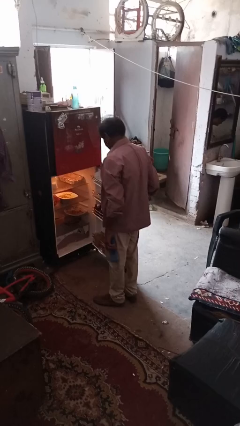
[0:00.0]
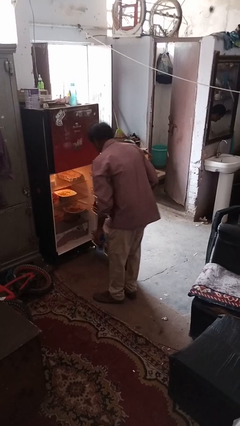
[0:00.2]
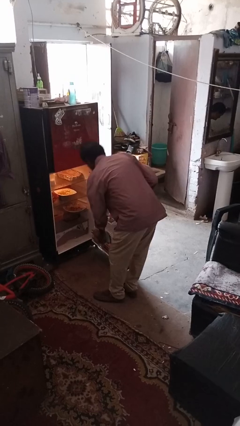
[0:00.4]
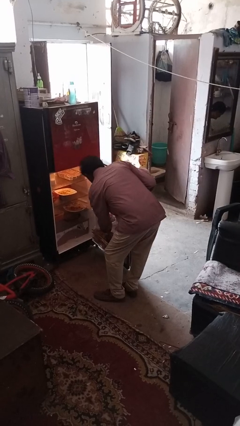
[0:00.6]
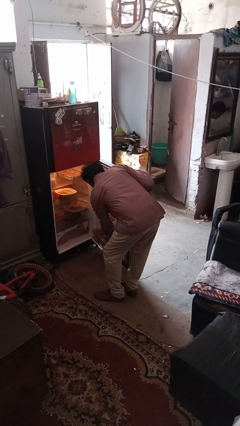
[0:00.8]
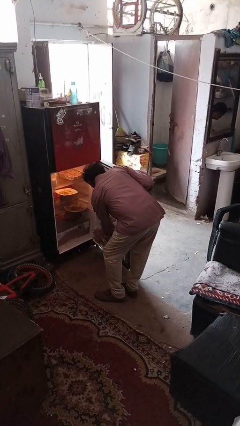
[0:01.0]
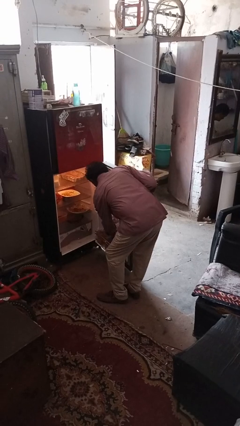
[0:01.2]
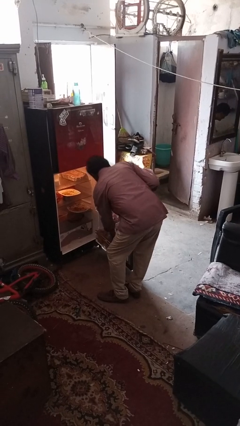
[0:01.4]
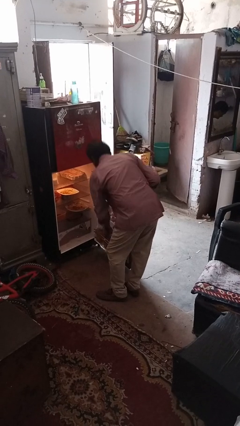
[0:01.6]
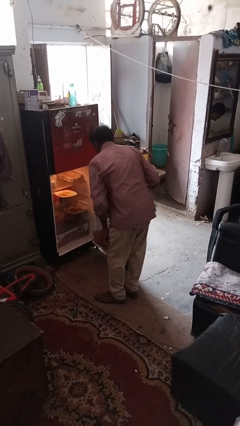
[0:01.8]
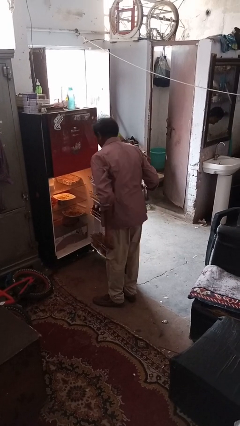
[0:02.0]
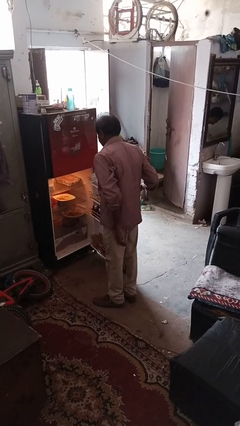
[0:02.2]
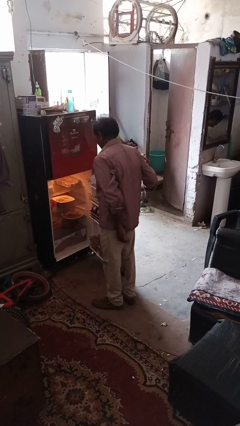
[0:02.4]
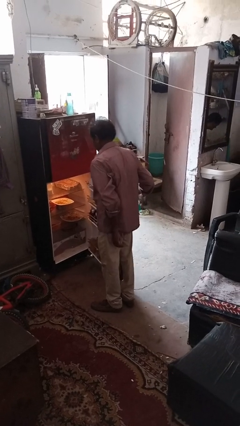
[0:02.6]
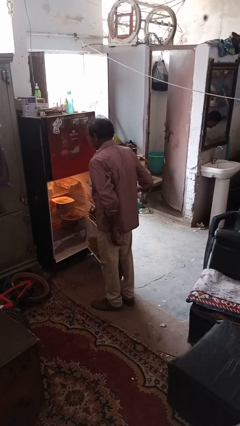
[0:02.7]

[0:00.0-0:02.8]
person puts object into refrigerator

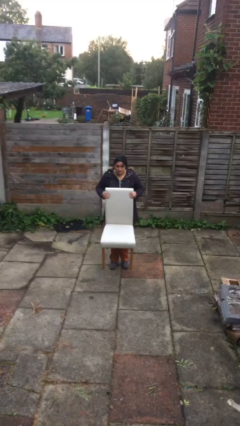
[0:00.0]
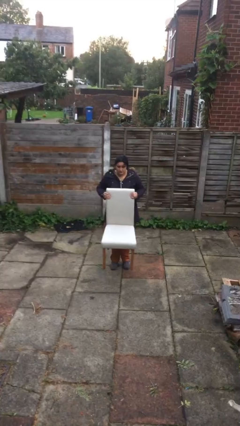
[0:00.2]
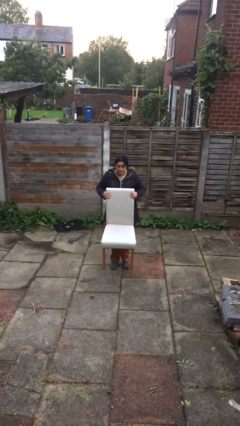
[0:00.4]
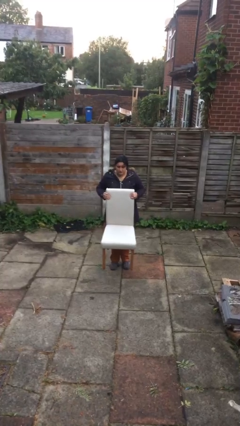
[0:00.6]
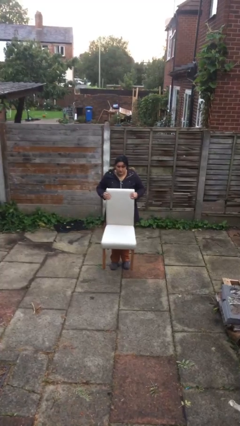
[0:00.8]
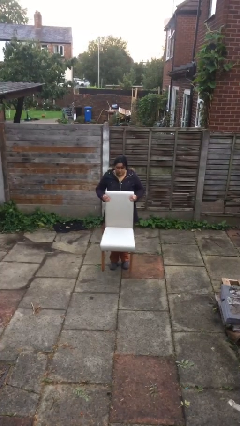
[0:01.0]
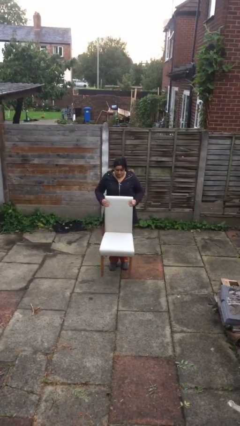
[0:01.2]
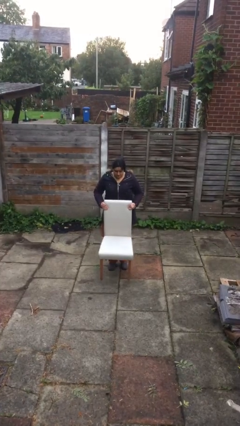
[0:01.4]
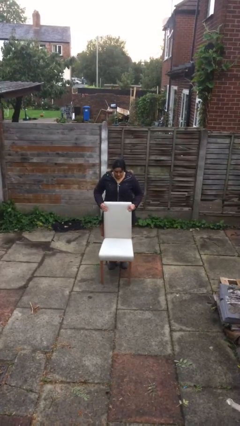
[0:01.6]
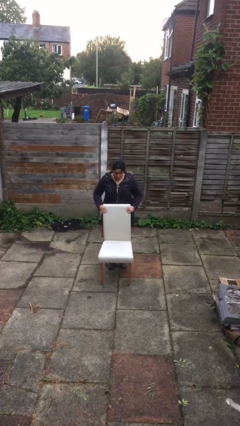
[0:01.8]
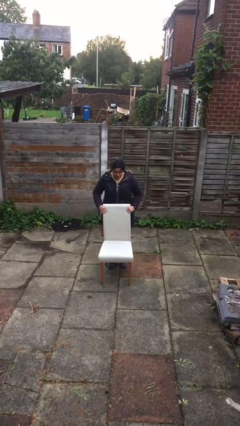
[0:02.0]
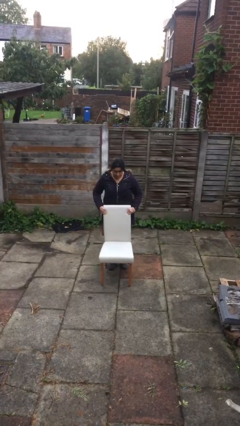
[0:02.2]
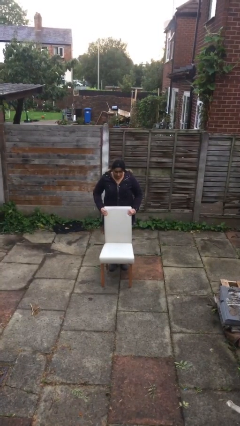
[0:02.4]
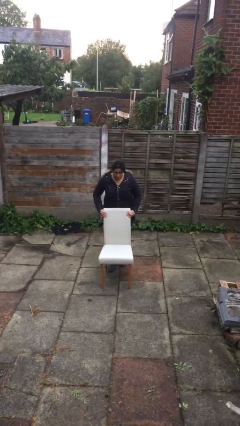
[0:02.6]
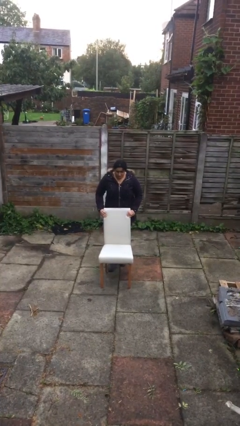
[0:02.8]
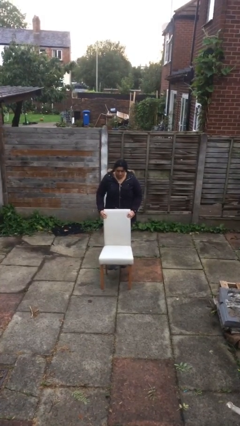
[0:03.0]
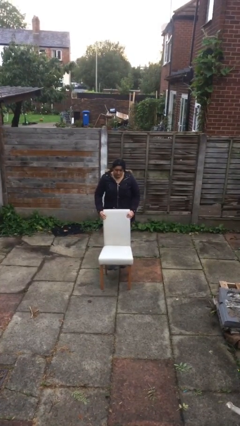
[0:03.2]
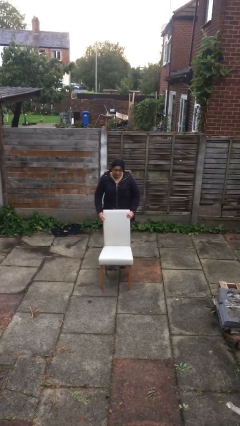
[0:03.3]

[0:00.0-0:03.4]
person puts down object on floor

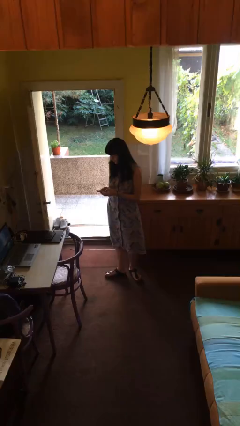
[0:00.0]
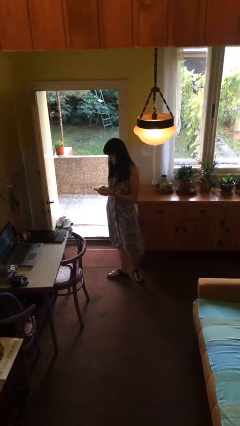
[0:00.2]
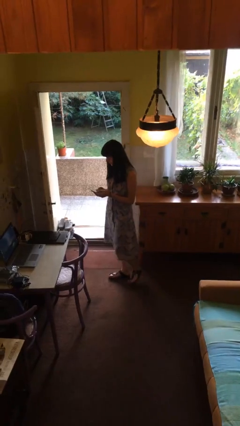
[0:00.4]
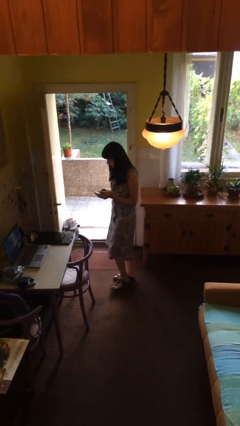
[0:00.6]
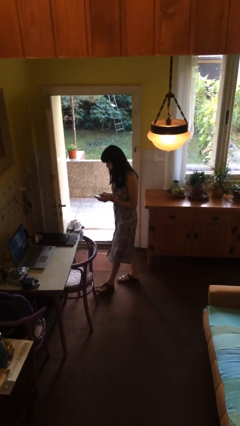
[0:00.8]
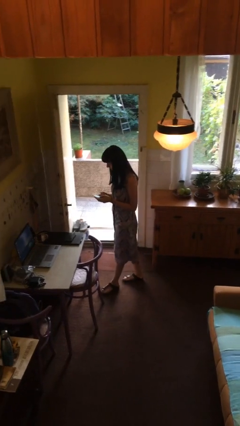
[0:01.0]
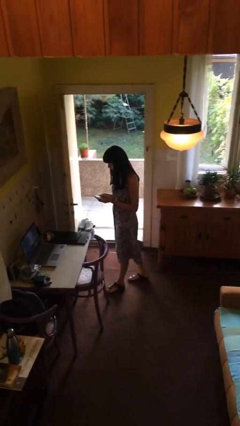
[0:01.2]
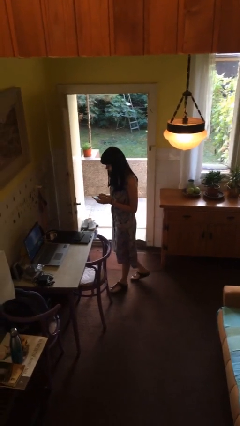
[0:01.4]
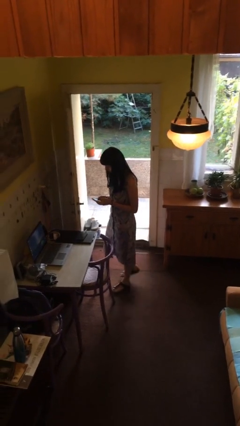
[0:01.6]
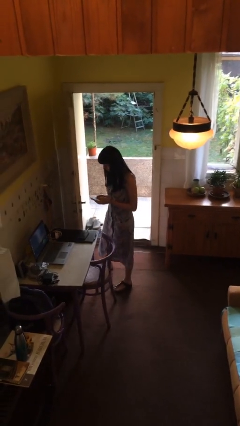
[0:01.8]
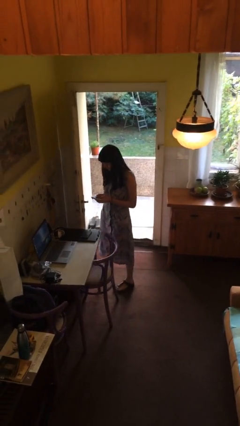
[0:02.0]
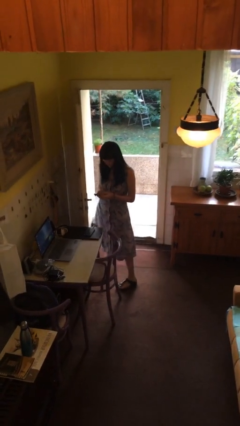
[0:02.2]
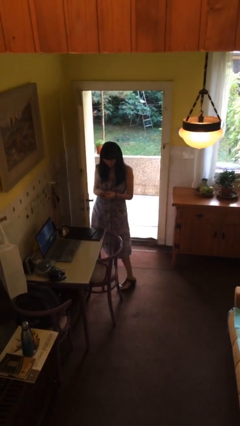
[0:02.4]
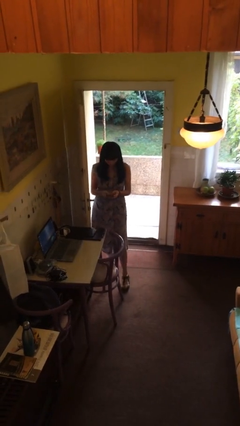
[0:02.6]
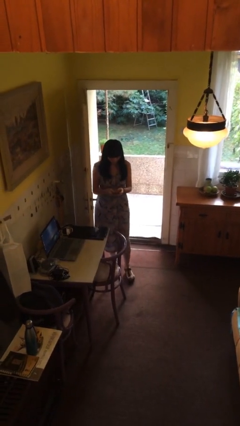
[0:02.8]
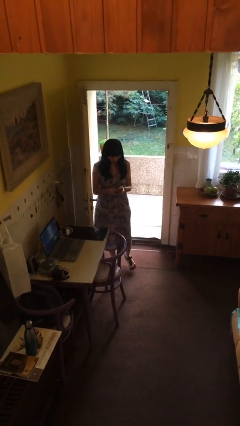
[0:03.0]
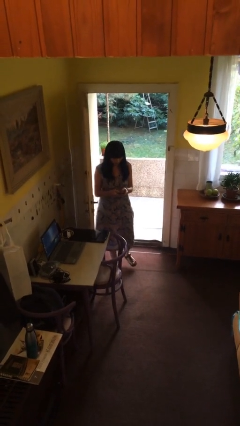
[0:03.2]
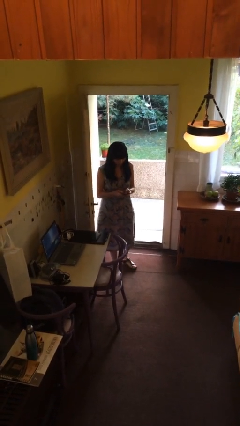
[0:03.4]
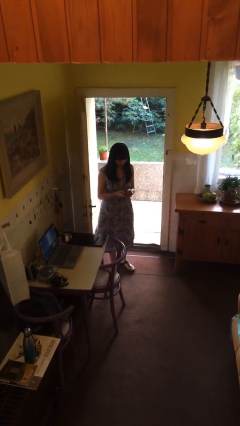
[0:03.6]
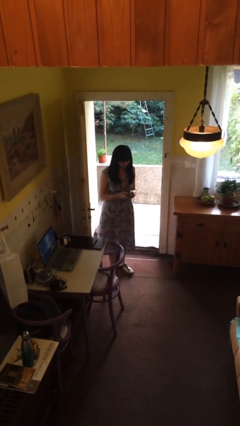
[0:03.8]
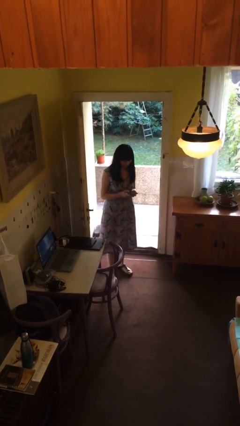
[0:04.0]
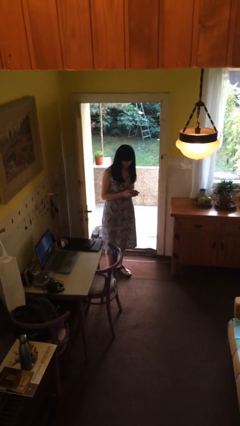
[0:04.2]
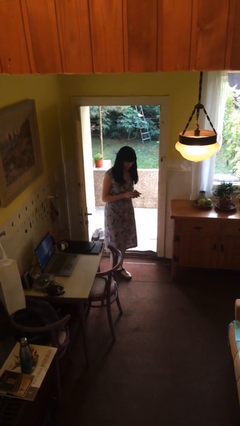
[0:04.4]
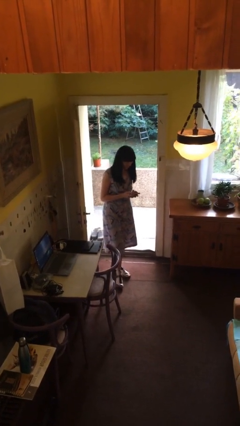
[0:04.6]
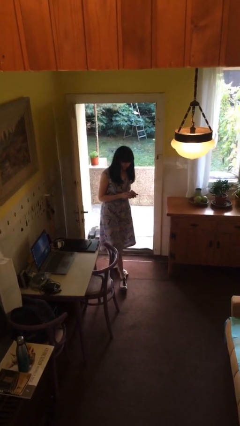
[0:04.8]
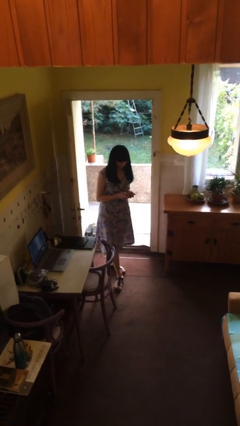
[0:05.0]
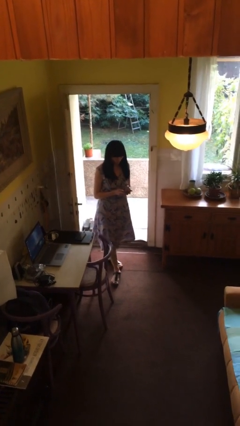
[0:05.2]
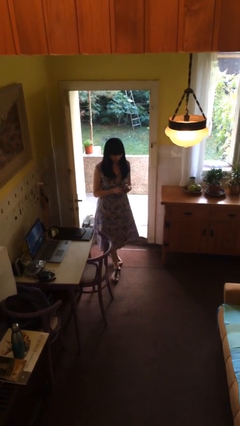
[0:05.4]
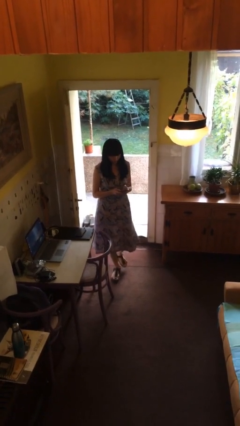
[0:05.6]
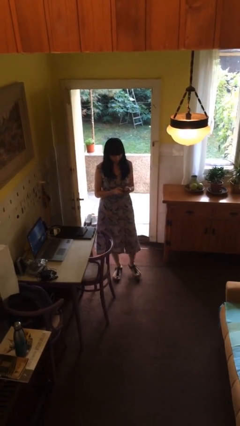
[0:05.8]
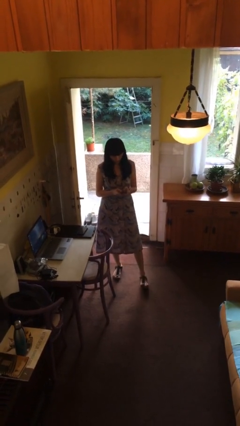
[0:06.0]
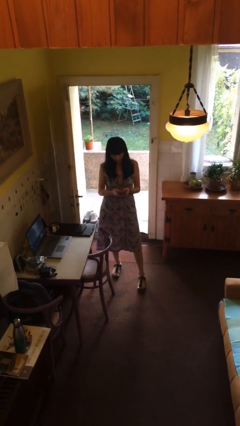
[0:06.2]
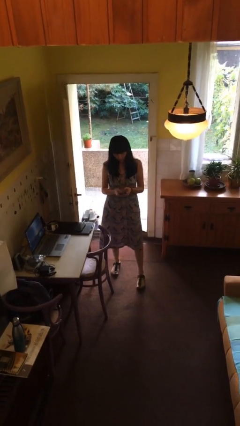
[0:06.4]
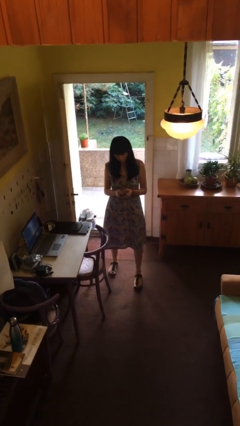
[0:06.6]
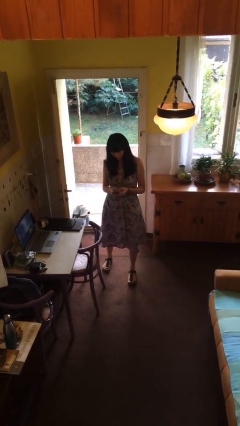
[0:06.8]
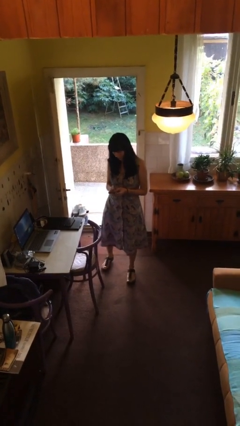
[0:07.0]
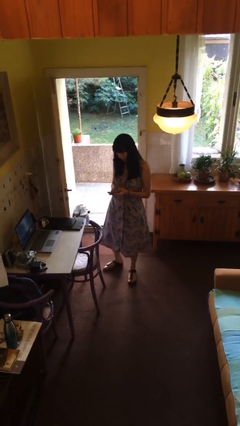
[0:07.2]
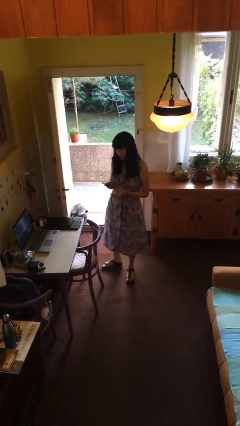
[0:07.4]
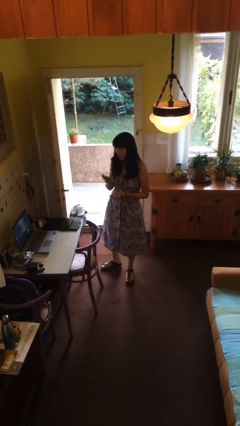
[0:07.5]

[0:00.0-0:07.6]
person texts on phone

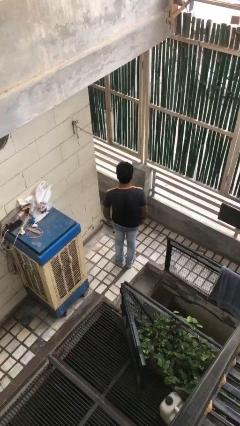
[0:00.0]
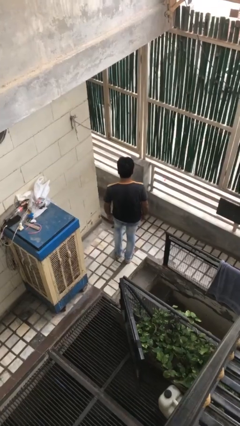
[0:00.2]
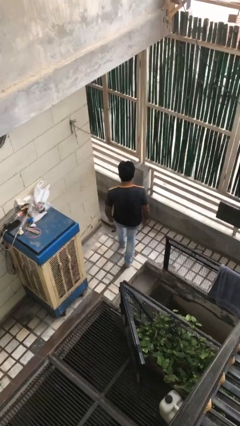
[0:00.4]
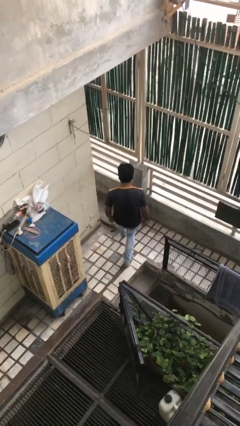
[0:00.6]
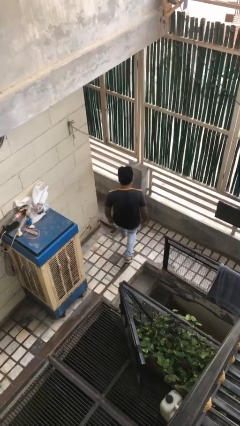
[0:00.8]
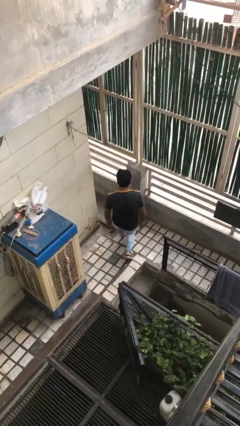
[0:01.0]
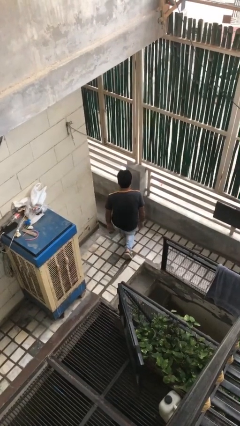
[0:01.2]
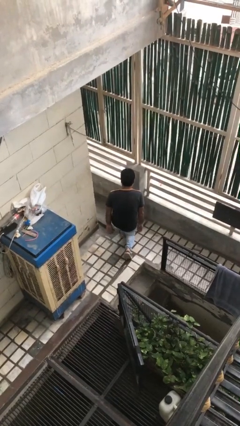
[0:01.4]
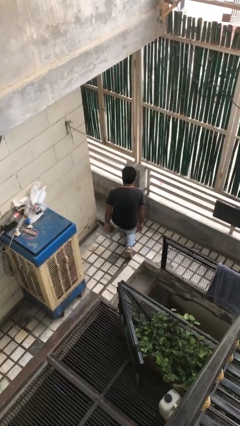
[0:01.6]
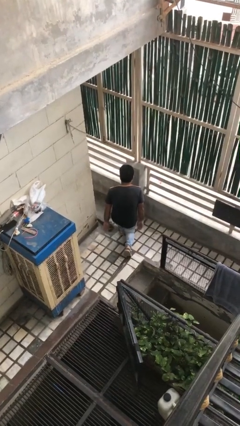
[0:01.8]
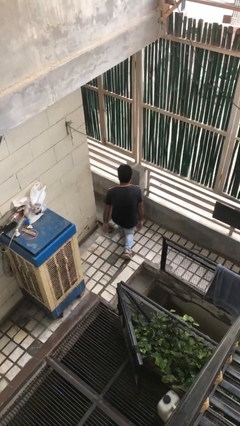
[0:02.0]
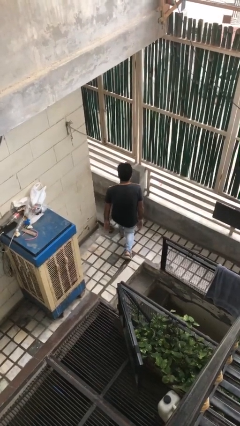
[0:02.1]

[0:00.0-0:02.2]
person kneels

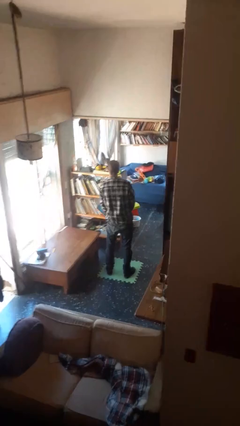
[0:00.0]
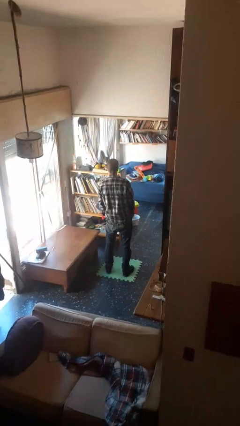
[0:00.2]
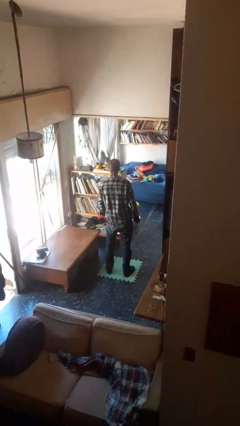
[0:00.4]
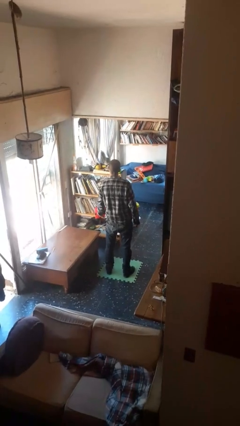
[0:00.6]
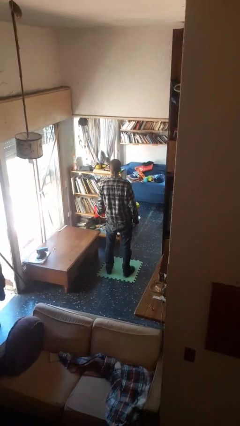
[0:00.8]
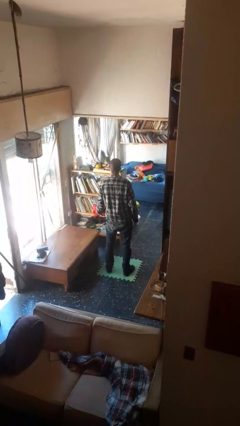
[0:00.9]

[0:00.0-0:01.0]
person catches dropped object

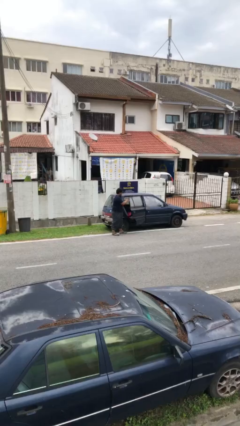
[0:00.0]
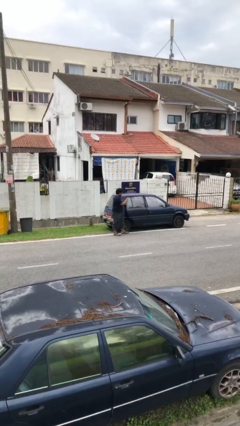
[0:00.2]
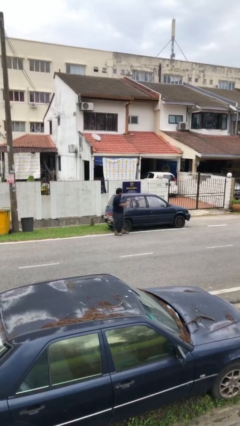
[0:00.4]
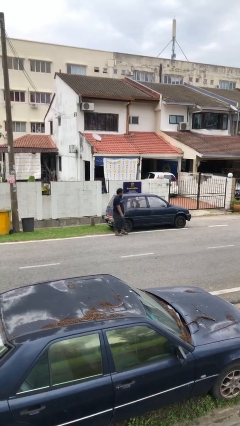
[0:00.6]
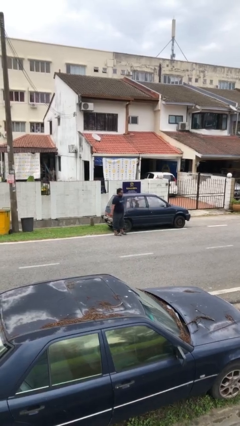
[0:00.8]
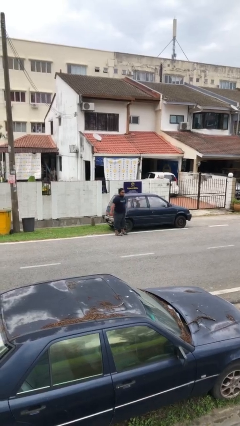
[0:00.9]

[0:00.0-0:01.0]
person closes car door
